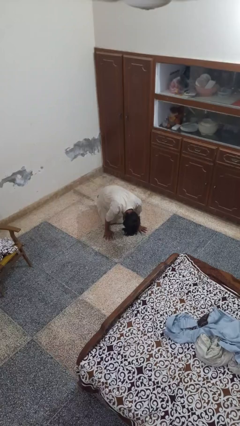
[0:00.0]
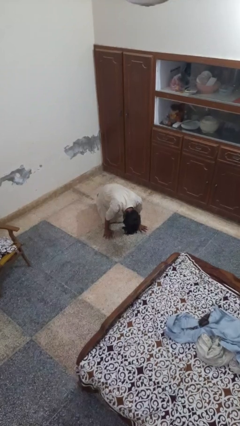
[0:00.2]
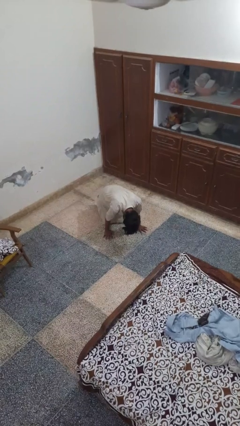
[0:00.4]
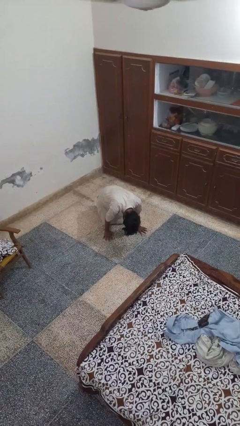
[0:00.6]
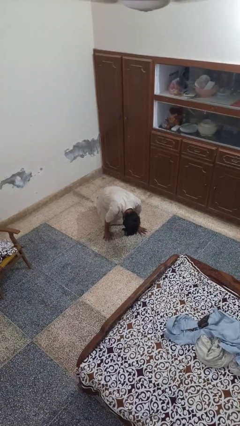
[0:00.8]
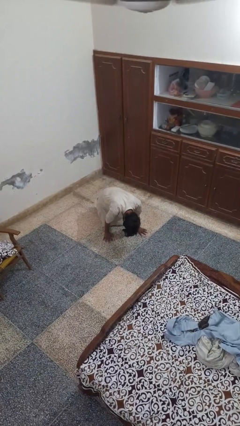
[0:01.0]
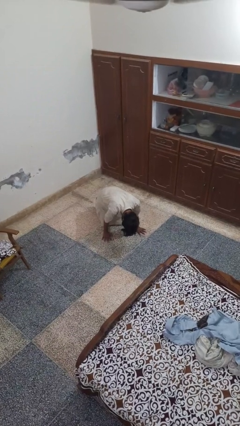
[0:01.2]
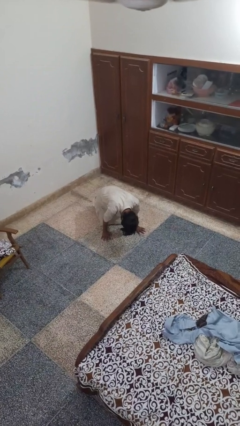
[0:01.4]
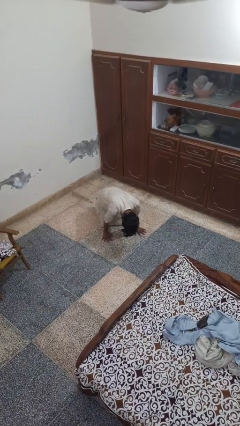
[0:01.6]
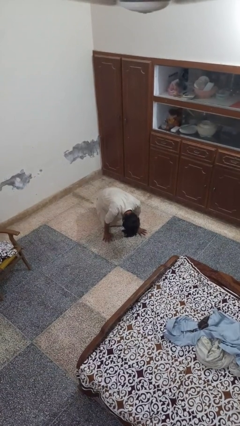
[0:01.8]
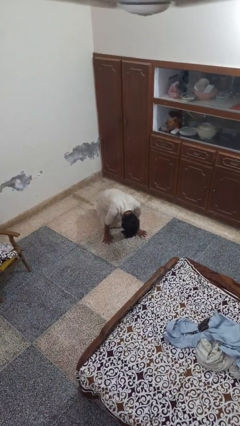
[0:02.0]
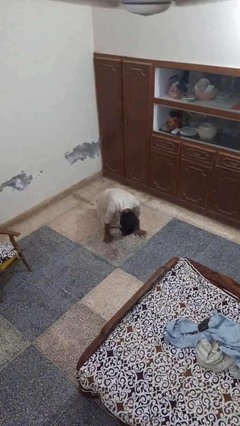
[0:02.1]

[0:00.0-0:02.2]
person lies down on floor

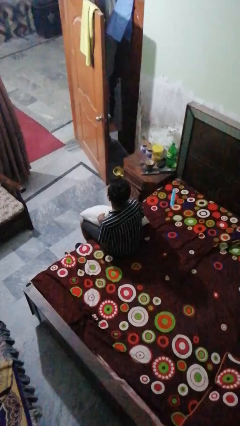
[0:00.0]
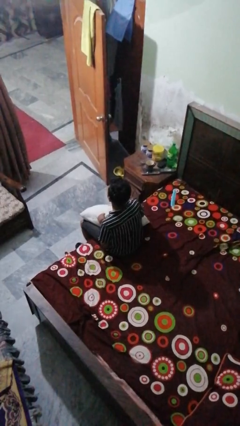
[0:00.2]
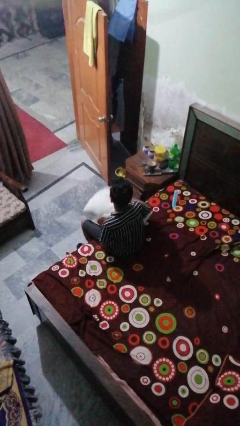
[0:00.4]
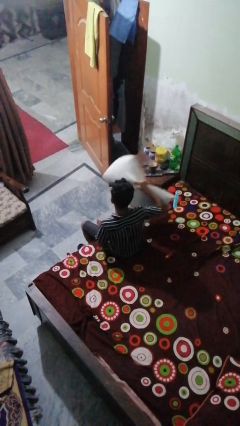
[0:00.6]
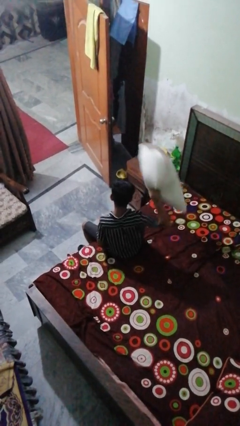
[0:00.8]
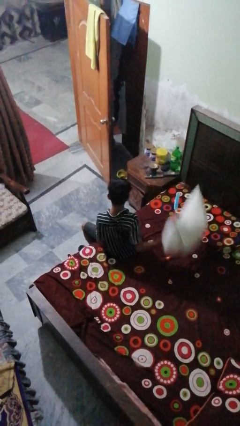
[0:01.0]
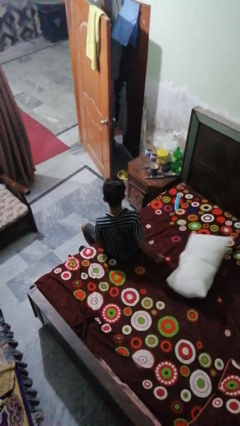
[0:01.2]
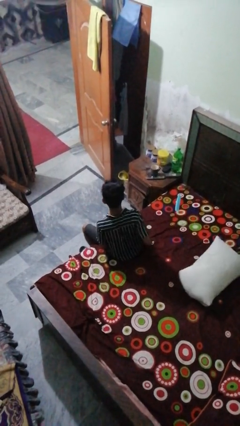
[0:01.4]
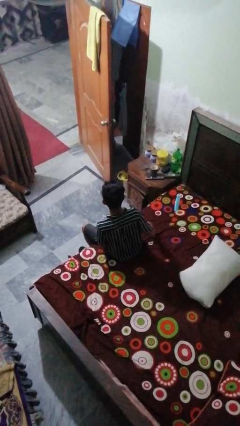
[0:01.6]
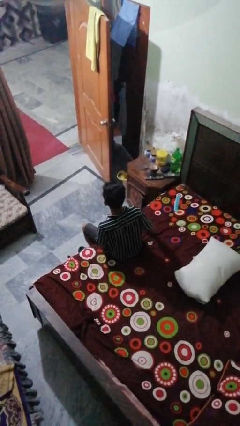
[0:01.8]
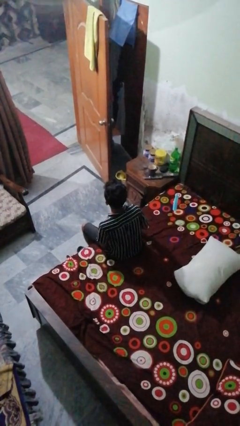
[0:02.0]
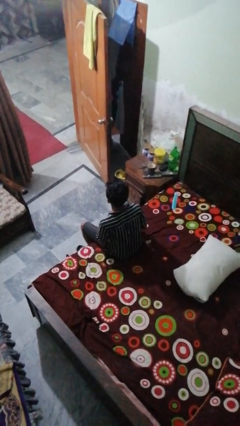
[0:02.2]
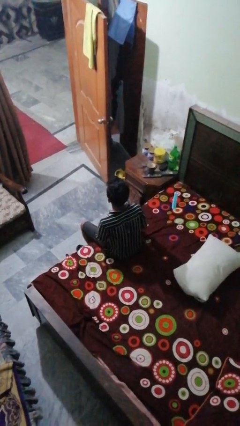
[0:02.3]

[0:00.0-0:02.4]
person throws object on bed

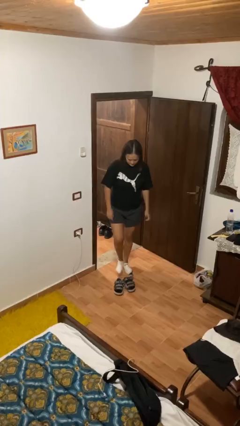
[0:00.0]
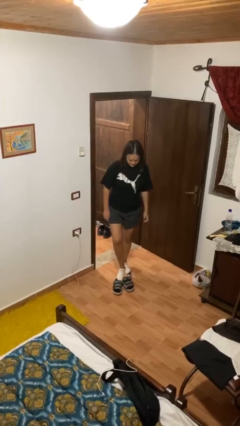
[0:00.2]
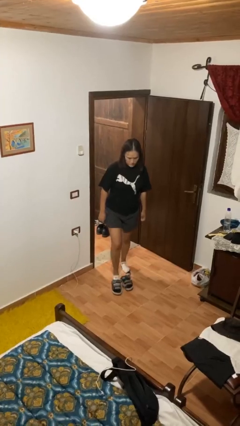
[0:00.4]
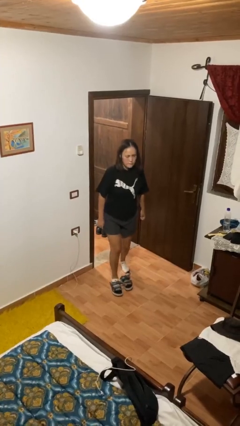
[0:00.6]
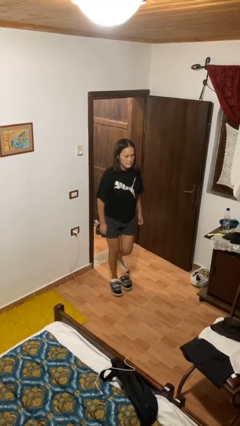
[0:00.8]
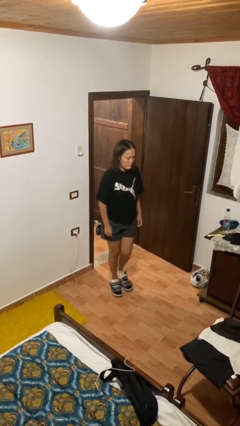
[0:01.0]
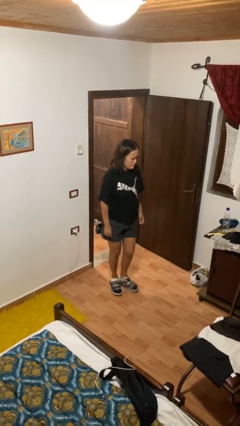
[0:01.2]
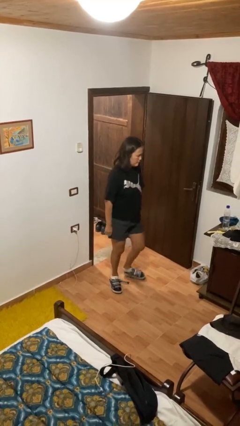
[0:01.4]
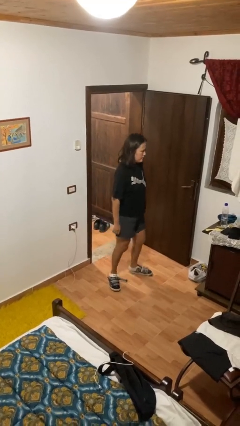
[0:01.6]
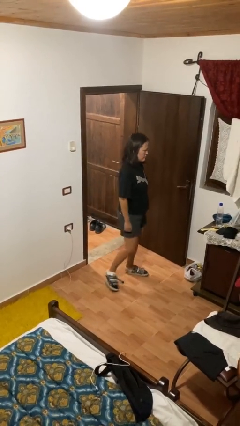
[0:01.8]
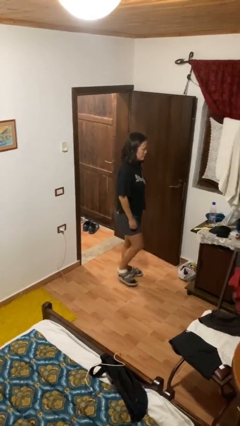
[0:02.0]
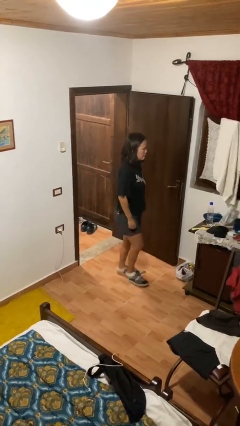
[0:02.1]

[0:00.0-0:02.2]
person puts on shoes

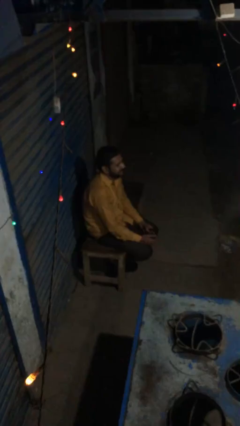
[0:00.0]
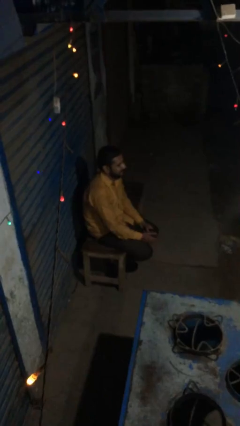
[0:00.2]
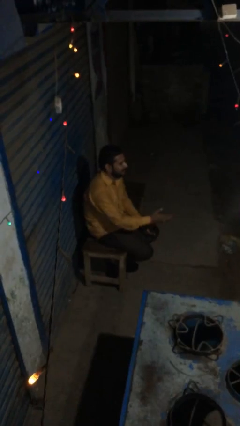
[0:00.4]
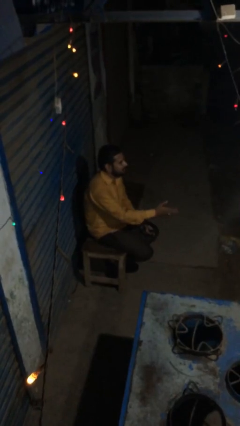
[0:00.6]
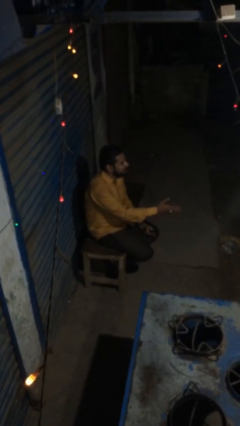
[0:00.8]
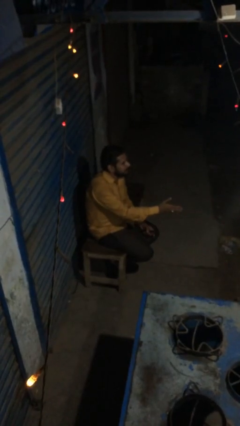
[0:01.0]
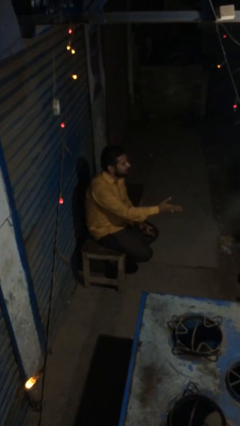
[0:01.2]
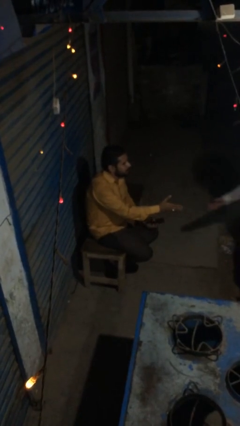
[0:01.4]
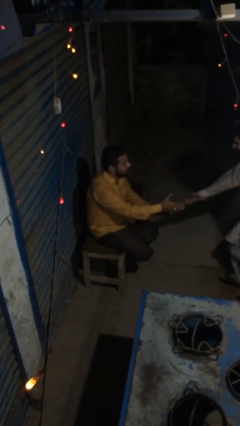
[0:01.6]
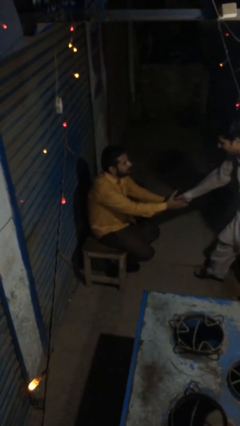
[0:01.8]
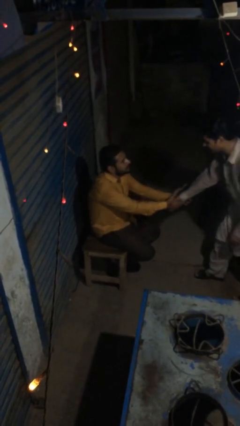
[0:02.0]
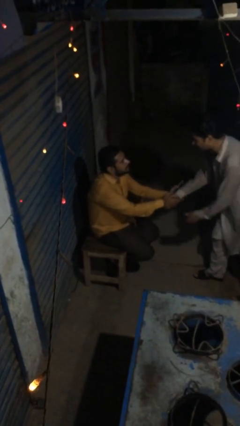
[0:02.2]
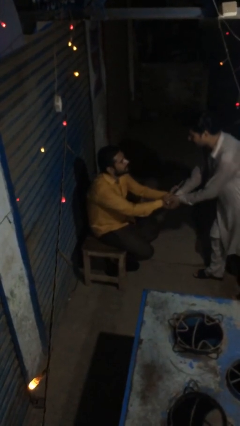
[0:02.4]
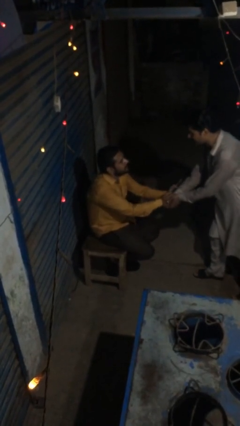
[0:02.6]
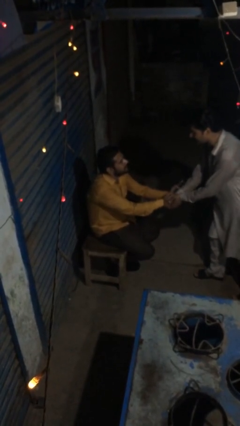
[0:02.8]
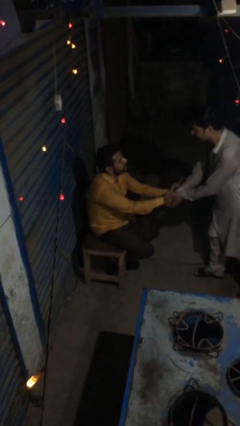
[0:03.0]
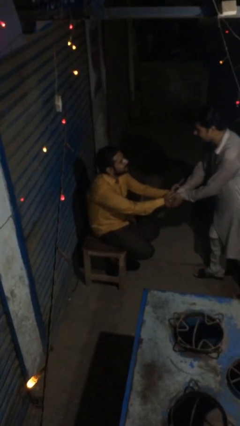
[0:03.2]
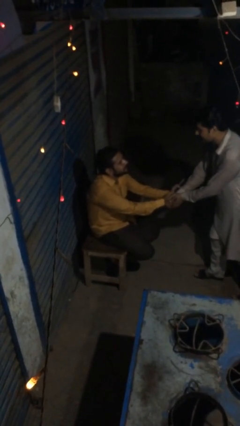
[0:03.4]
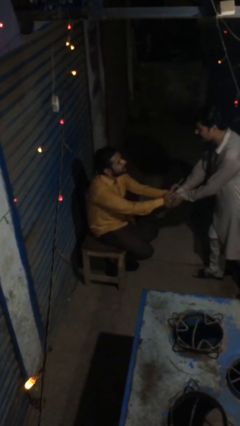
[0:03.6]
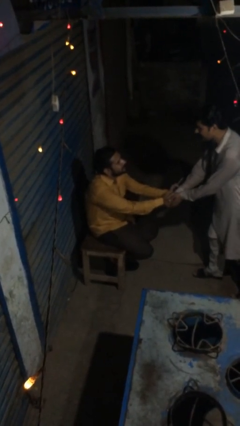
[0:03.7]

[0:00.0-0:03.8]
person shakes hand

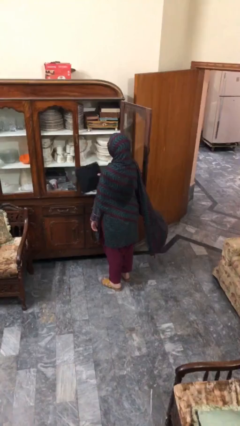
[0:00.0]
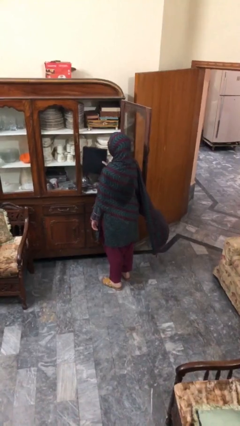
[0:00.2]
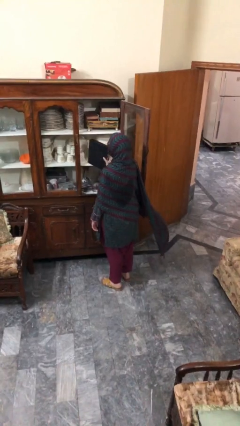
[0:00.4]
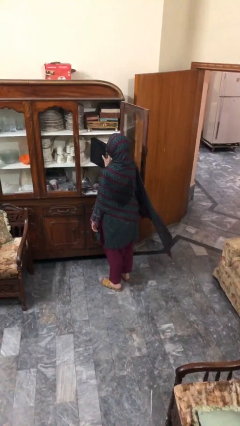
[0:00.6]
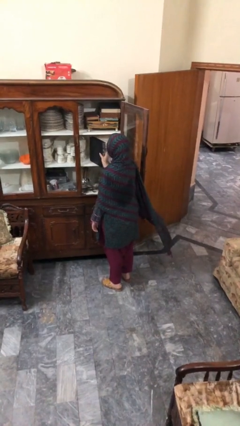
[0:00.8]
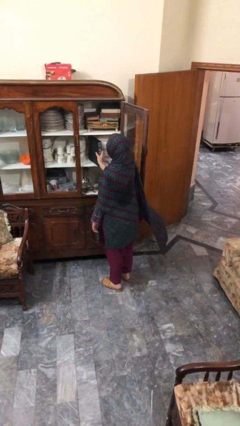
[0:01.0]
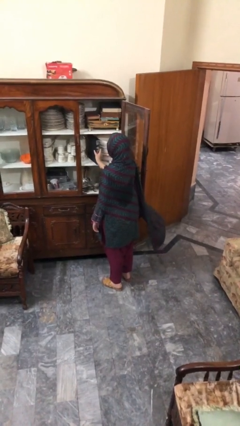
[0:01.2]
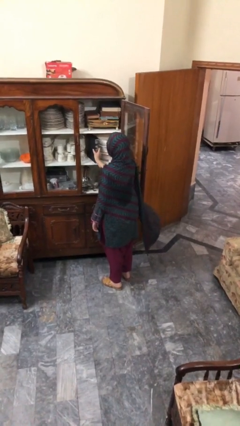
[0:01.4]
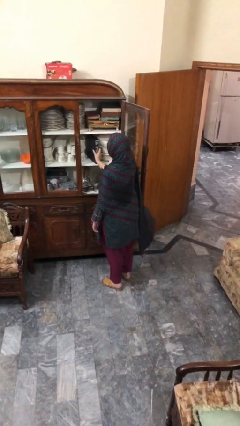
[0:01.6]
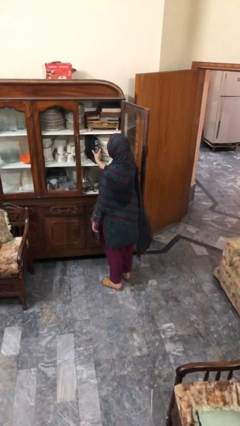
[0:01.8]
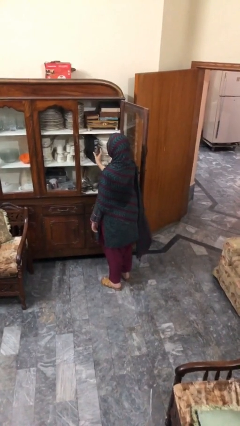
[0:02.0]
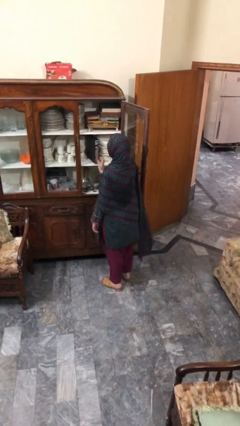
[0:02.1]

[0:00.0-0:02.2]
person puts down object on countertop

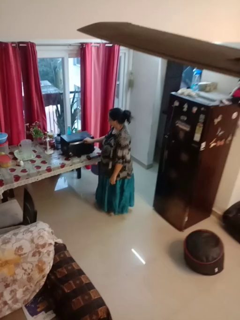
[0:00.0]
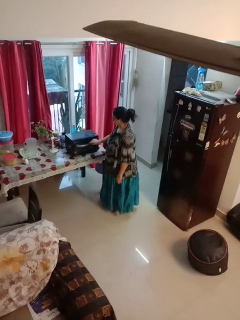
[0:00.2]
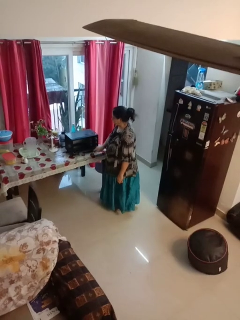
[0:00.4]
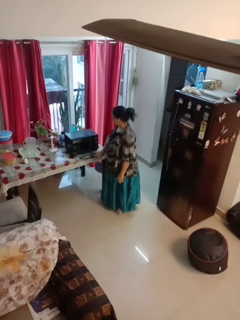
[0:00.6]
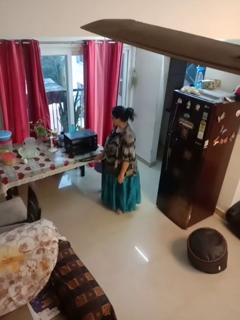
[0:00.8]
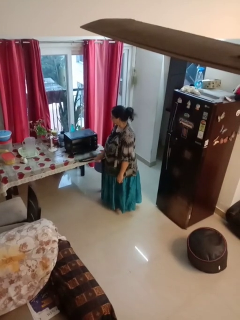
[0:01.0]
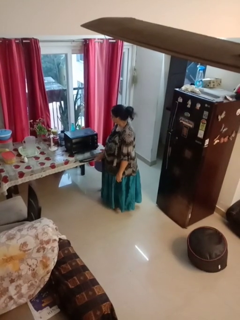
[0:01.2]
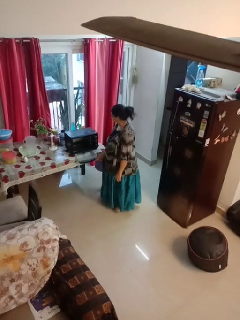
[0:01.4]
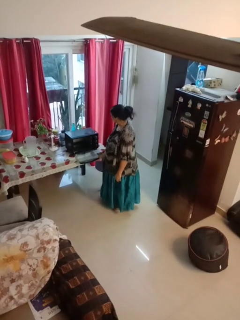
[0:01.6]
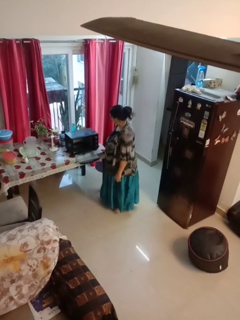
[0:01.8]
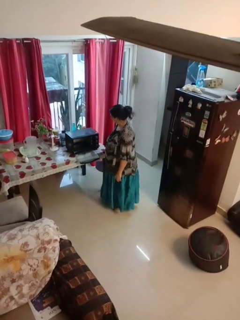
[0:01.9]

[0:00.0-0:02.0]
person opens microwave

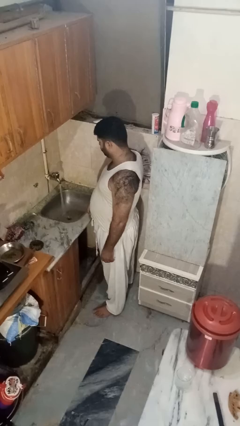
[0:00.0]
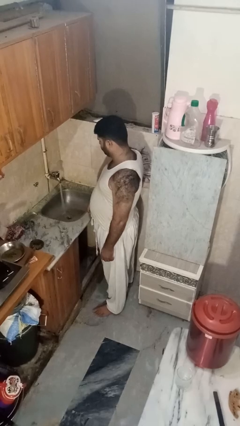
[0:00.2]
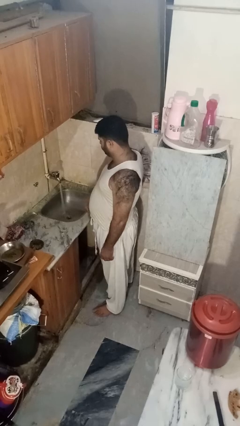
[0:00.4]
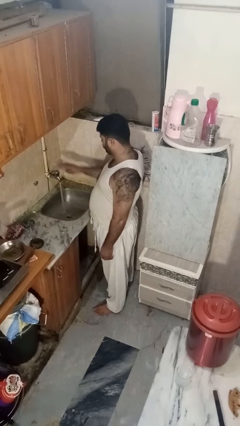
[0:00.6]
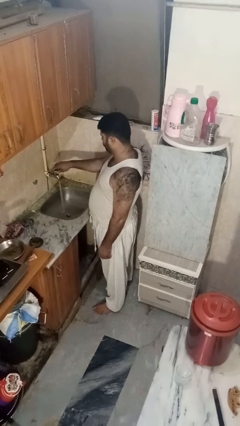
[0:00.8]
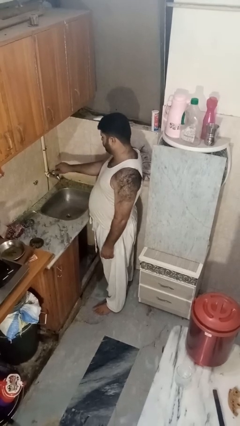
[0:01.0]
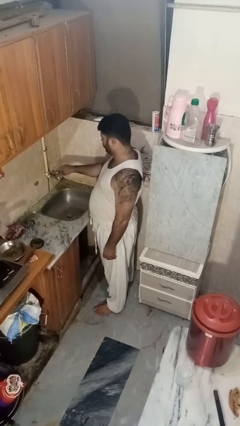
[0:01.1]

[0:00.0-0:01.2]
person turns off faucet

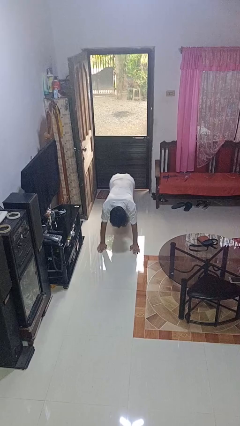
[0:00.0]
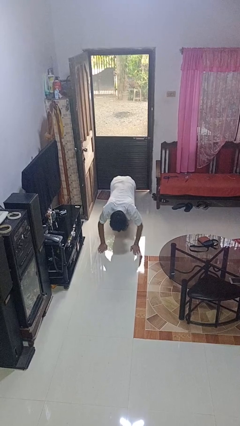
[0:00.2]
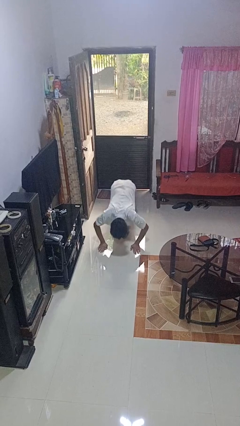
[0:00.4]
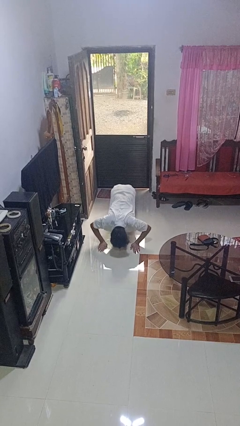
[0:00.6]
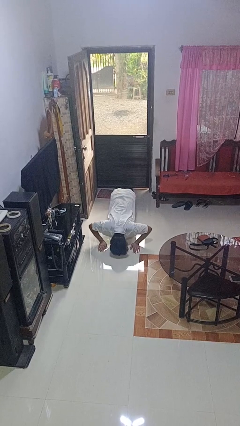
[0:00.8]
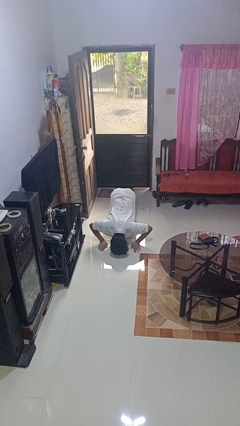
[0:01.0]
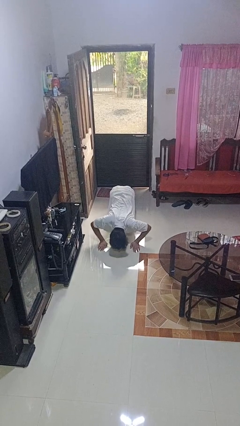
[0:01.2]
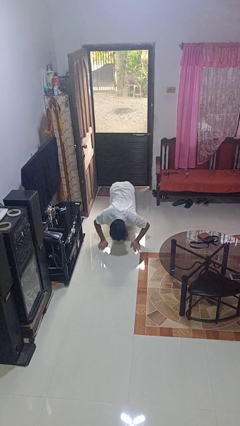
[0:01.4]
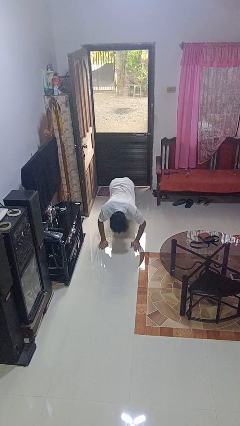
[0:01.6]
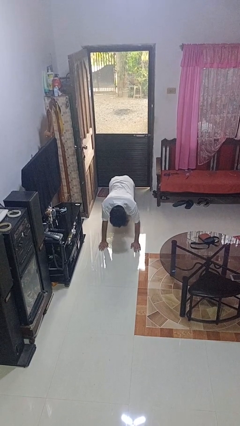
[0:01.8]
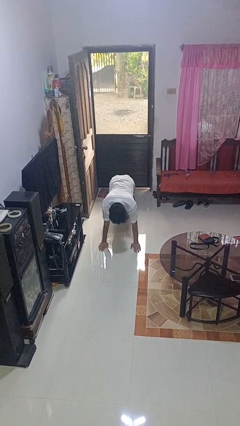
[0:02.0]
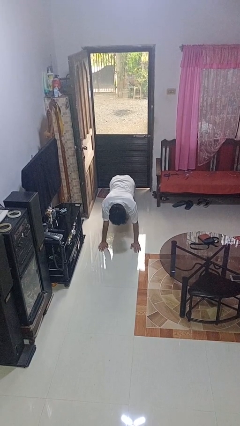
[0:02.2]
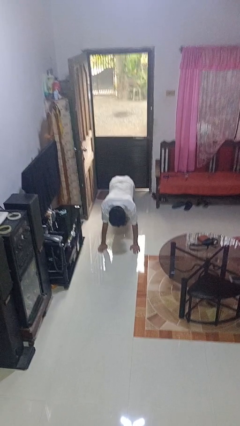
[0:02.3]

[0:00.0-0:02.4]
person exercises with pushup
